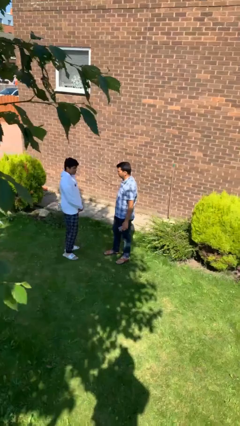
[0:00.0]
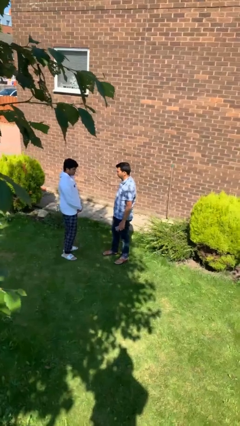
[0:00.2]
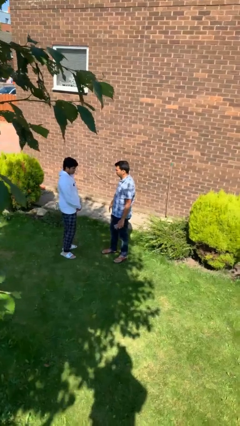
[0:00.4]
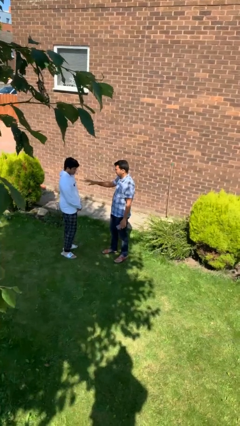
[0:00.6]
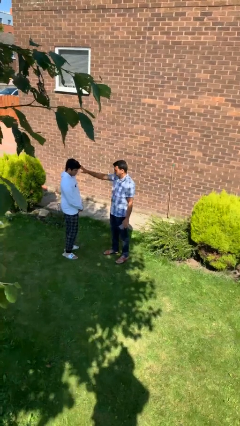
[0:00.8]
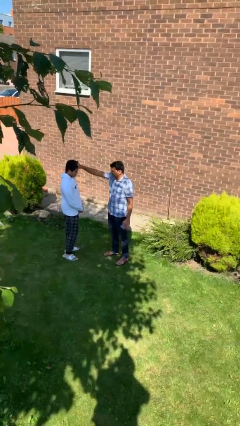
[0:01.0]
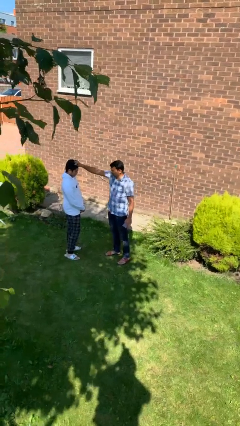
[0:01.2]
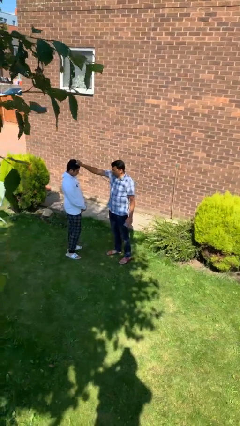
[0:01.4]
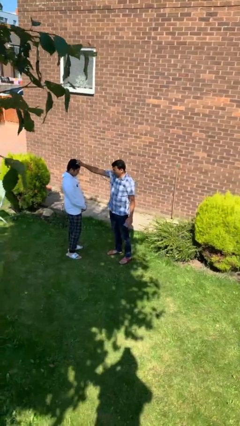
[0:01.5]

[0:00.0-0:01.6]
person grabs person by hair

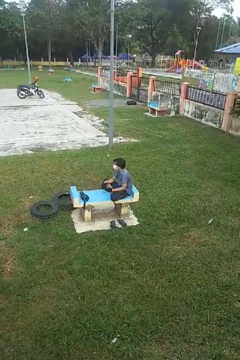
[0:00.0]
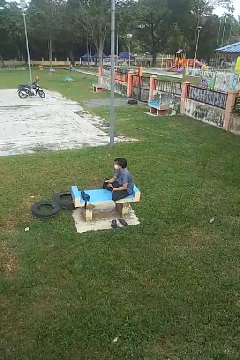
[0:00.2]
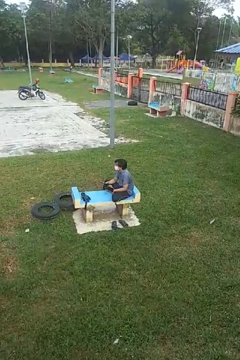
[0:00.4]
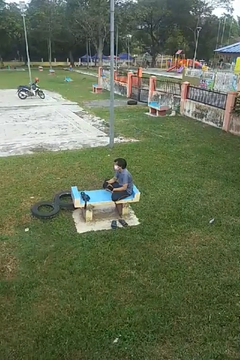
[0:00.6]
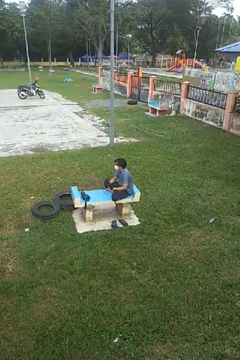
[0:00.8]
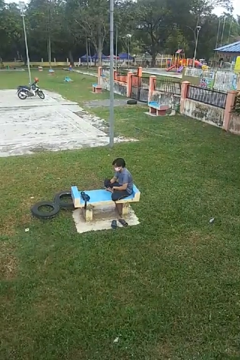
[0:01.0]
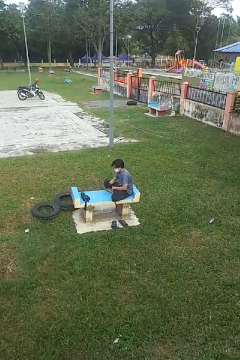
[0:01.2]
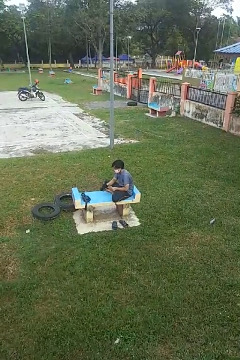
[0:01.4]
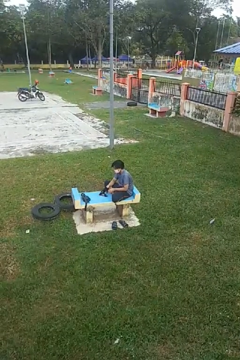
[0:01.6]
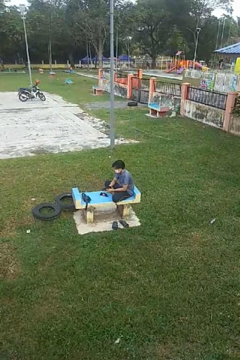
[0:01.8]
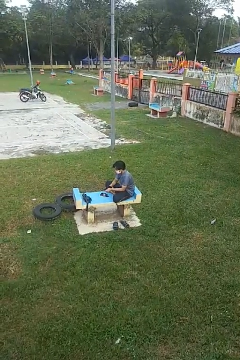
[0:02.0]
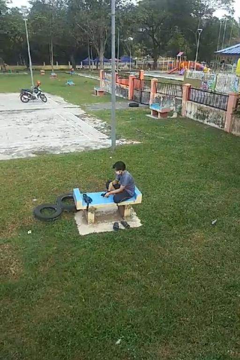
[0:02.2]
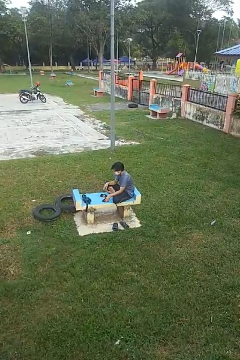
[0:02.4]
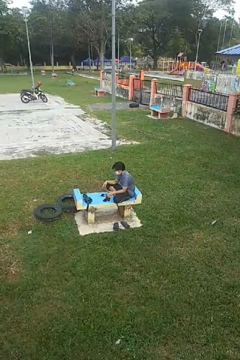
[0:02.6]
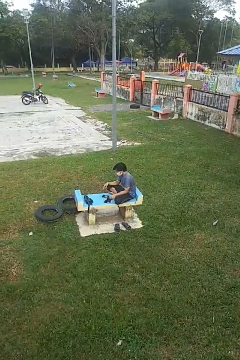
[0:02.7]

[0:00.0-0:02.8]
person takes off gloves

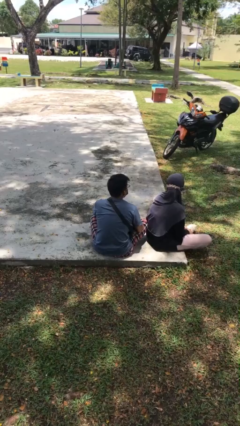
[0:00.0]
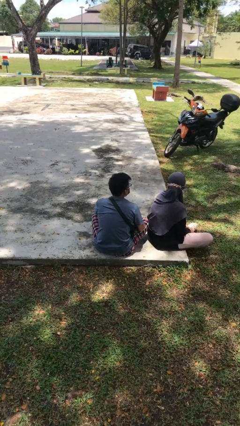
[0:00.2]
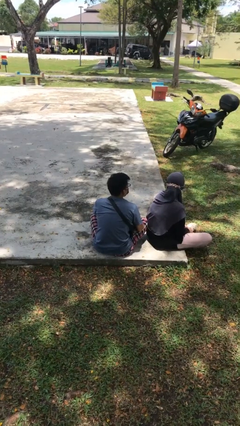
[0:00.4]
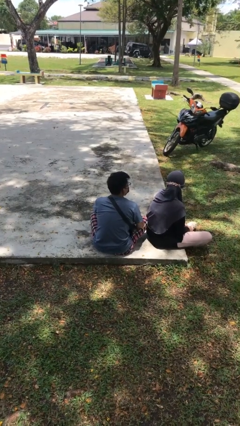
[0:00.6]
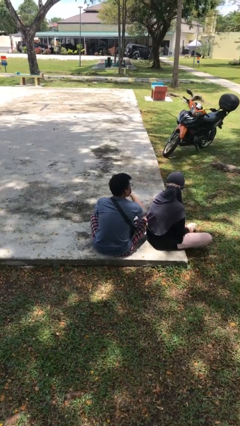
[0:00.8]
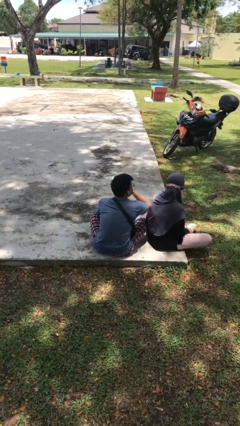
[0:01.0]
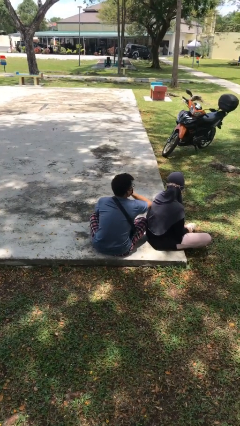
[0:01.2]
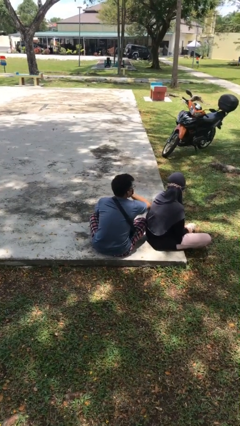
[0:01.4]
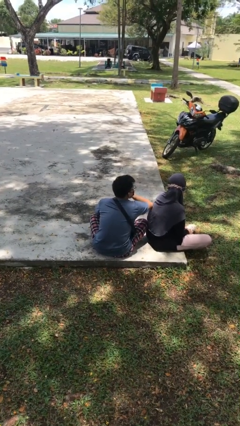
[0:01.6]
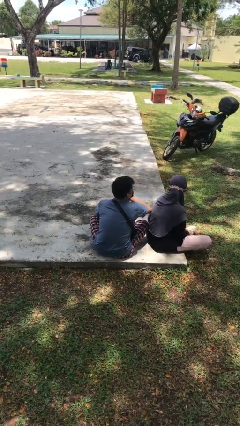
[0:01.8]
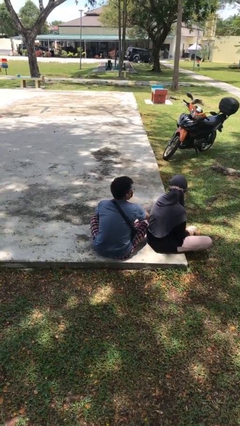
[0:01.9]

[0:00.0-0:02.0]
person nudges person with elbow

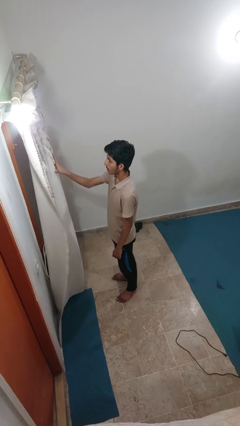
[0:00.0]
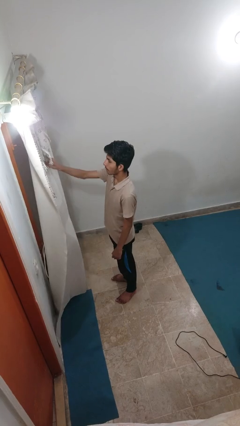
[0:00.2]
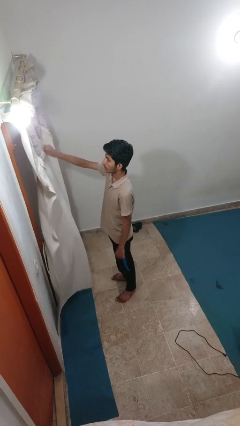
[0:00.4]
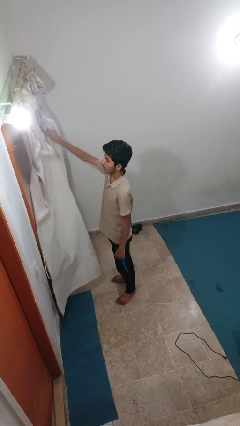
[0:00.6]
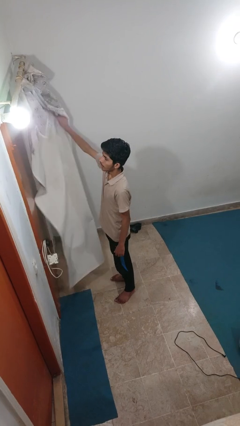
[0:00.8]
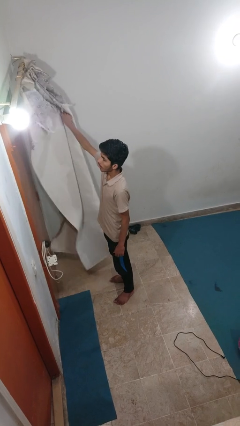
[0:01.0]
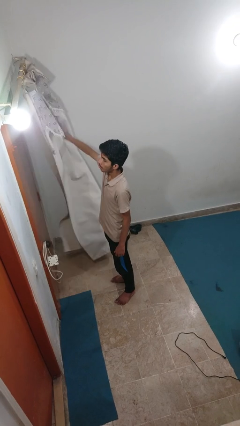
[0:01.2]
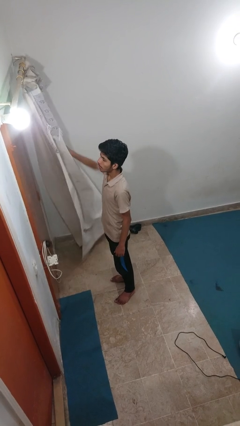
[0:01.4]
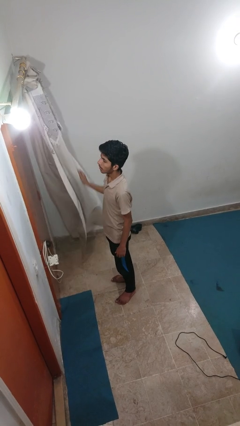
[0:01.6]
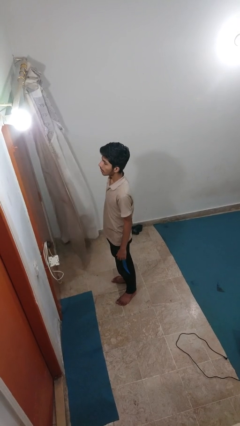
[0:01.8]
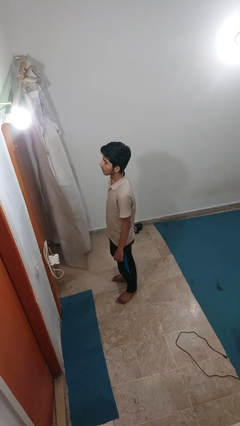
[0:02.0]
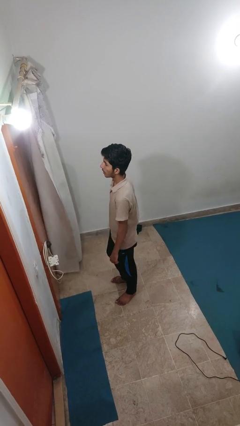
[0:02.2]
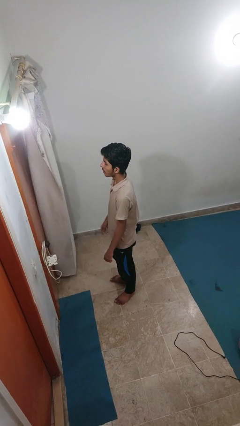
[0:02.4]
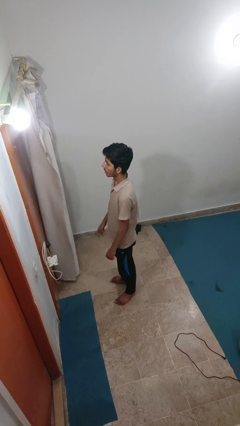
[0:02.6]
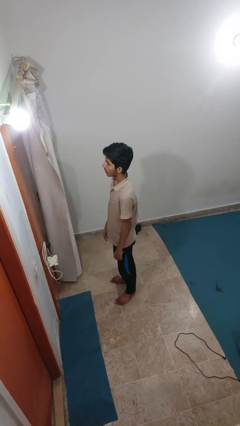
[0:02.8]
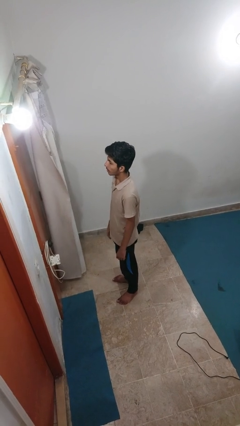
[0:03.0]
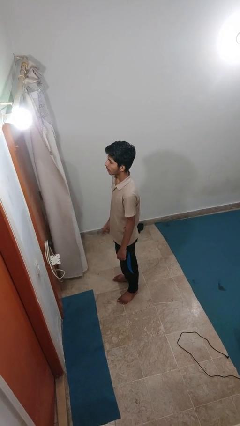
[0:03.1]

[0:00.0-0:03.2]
person opens curtains

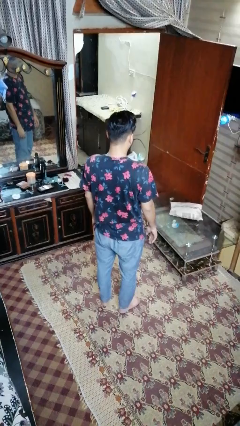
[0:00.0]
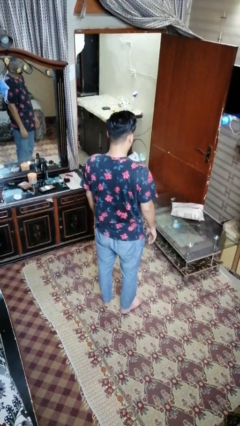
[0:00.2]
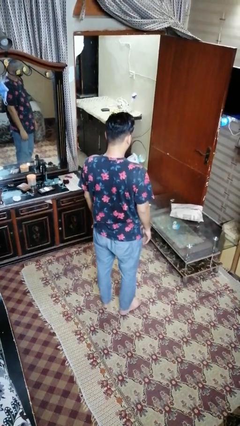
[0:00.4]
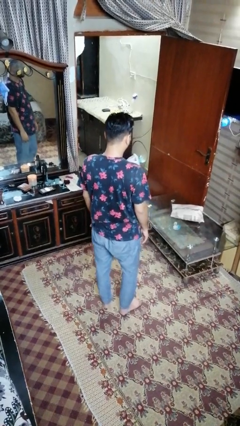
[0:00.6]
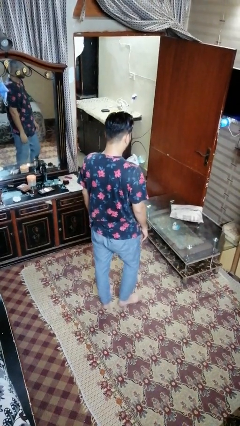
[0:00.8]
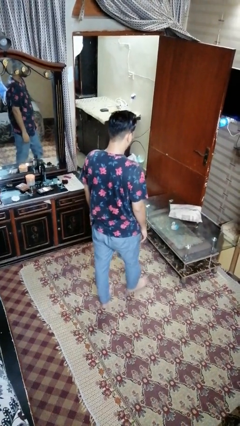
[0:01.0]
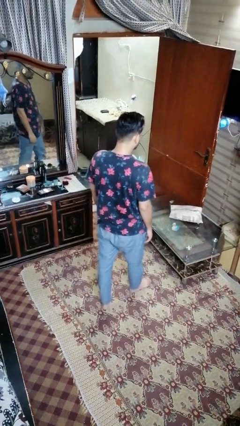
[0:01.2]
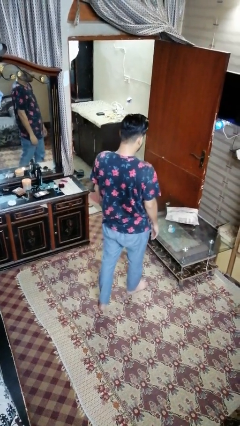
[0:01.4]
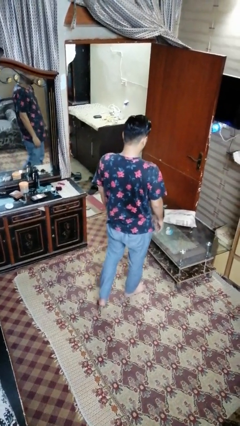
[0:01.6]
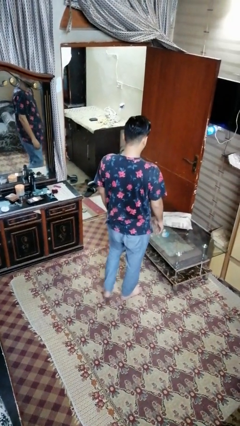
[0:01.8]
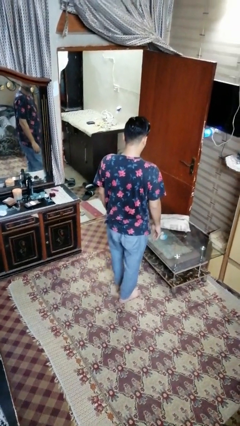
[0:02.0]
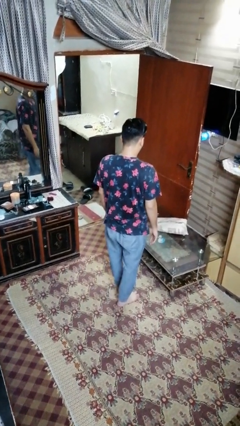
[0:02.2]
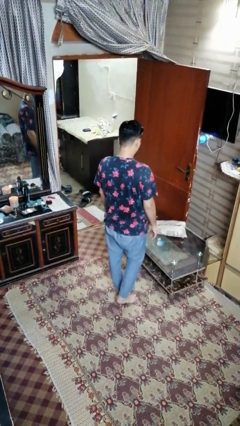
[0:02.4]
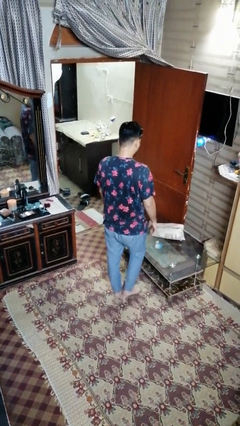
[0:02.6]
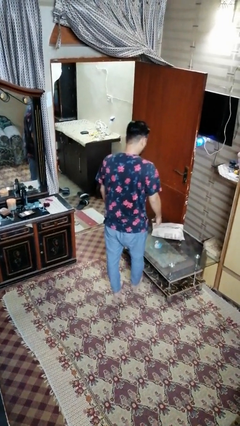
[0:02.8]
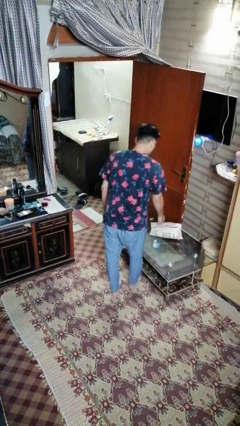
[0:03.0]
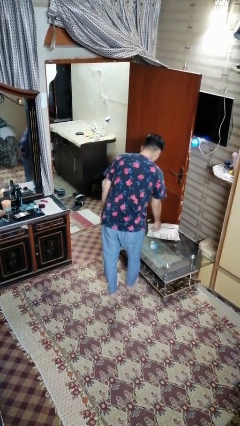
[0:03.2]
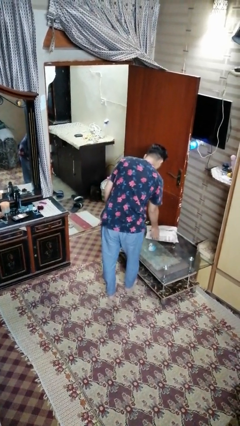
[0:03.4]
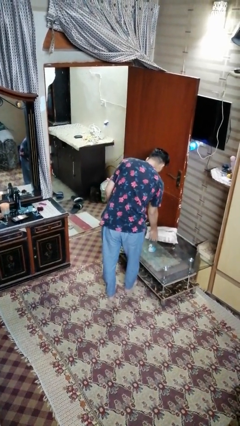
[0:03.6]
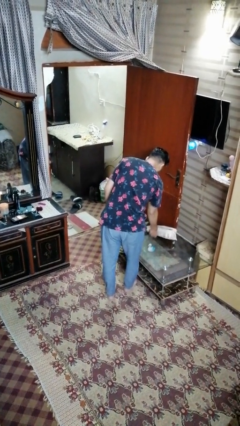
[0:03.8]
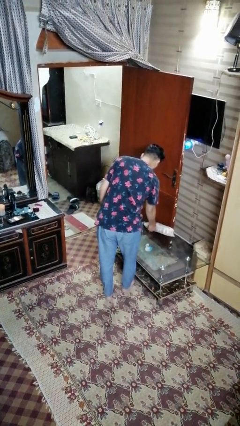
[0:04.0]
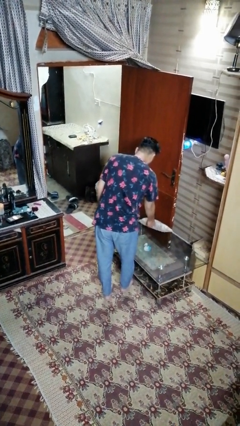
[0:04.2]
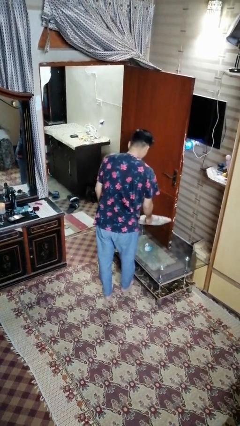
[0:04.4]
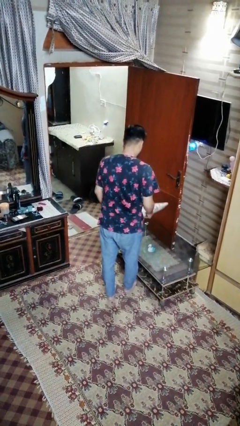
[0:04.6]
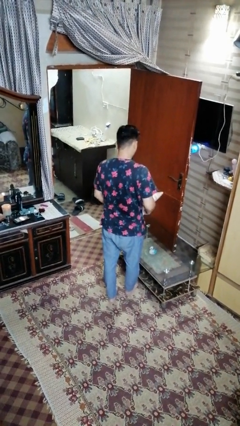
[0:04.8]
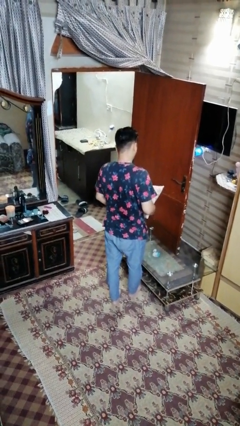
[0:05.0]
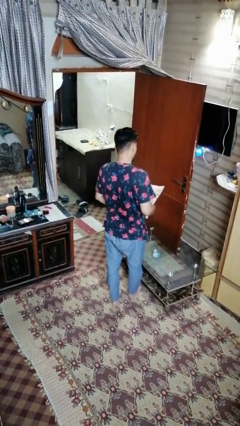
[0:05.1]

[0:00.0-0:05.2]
person picks up object from table

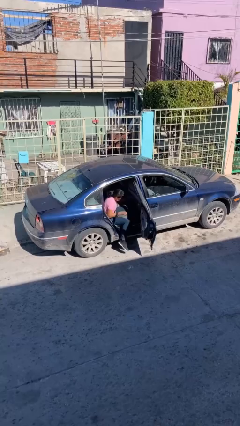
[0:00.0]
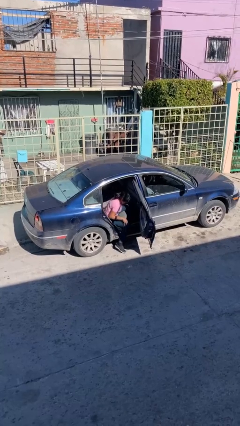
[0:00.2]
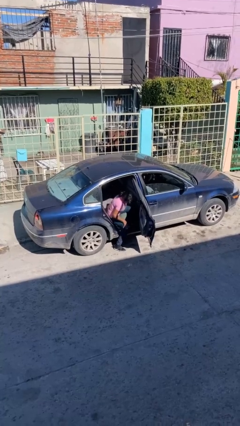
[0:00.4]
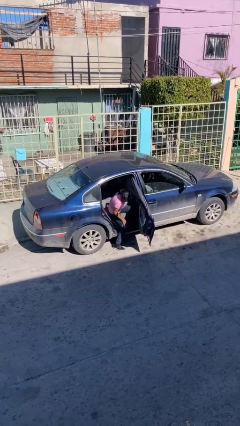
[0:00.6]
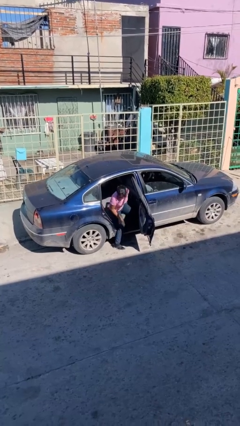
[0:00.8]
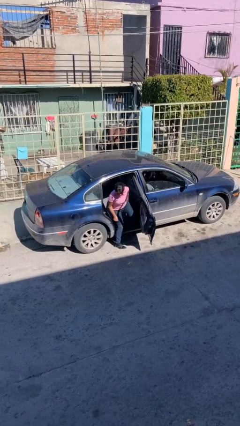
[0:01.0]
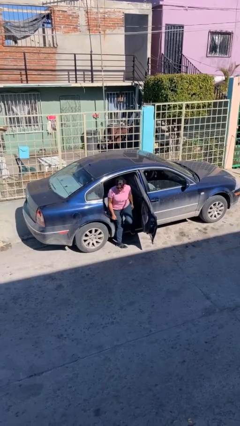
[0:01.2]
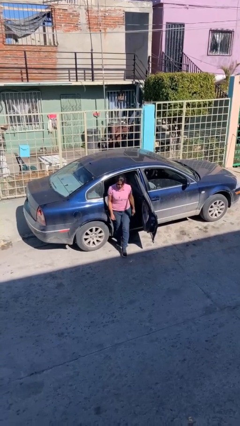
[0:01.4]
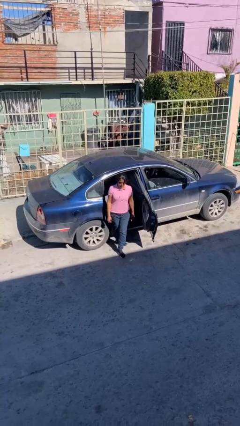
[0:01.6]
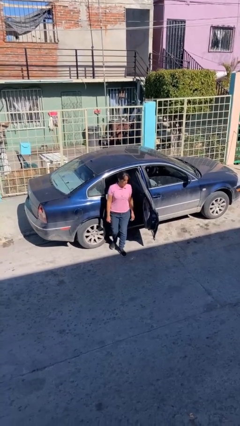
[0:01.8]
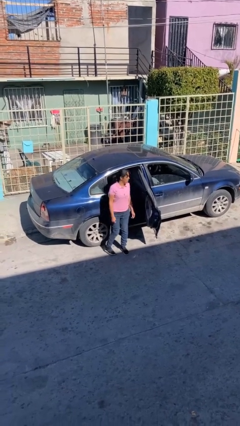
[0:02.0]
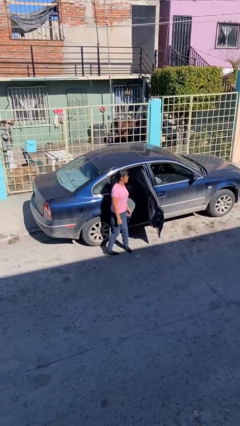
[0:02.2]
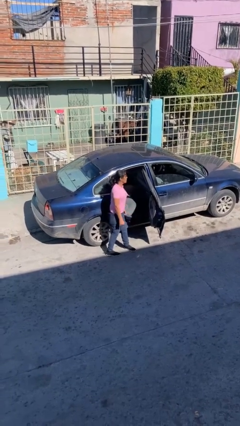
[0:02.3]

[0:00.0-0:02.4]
person exits car

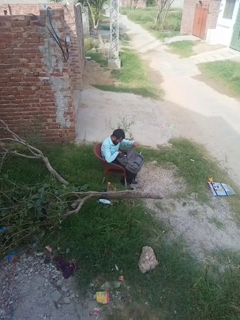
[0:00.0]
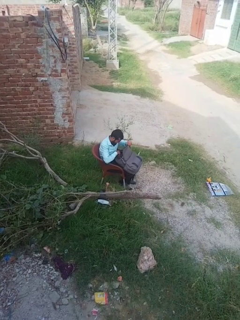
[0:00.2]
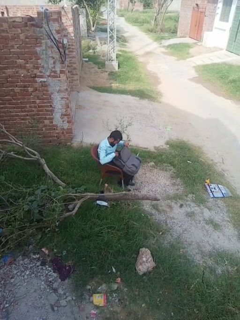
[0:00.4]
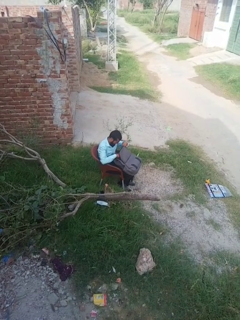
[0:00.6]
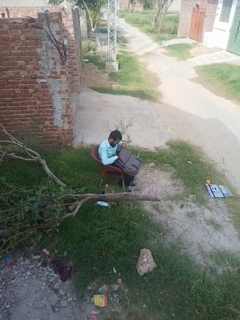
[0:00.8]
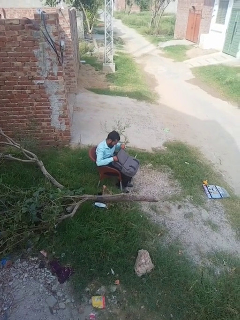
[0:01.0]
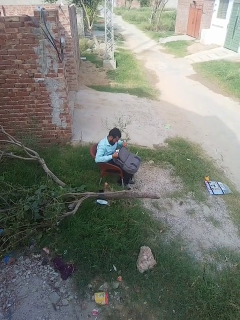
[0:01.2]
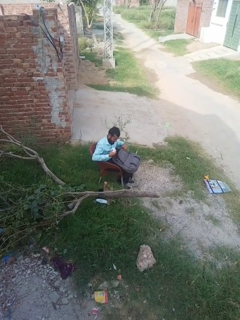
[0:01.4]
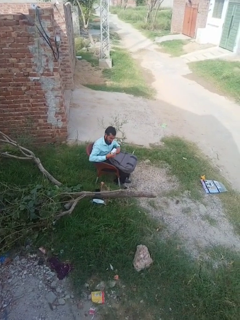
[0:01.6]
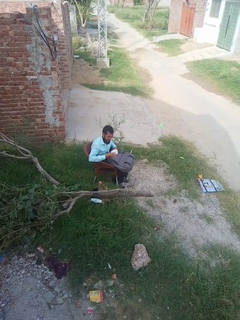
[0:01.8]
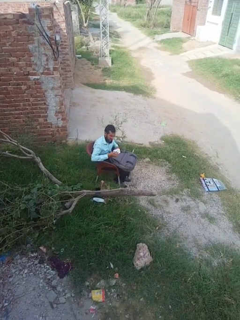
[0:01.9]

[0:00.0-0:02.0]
person takes object from backpack
